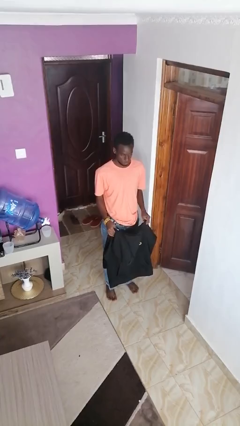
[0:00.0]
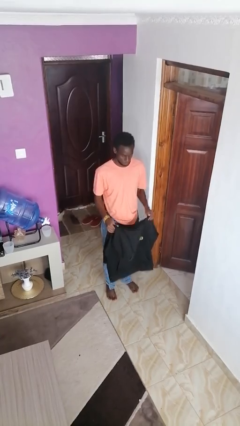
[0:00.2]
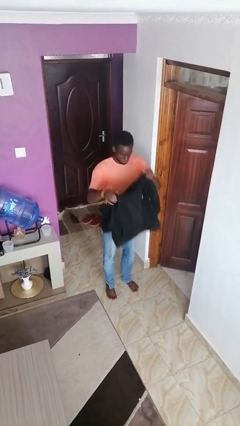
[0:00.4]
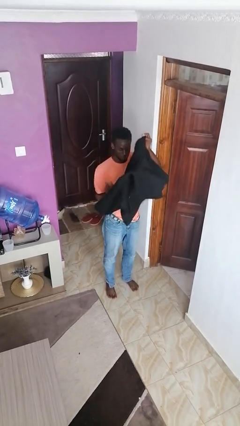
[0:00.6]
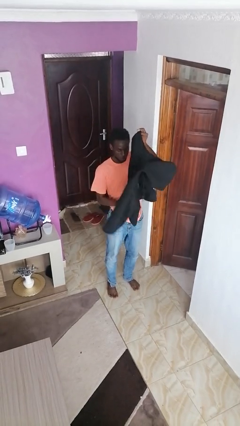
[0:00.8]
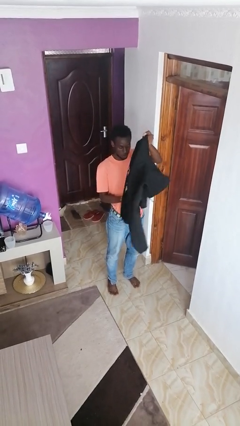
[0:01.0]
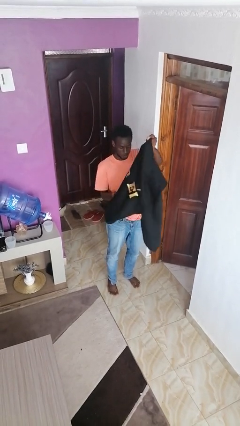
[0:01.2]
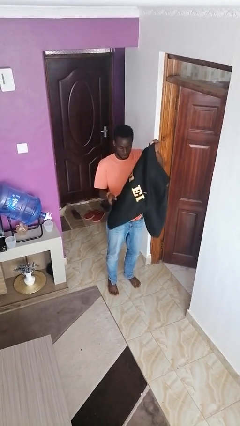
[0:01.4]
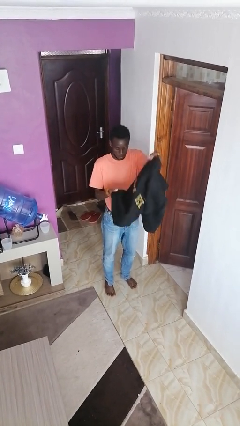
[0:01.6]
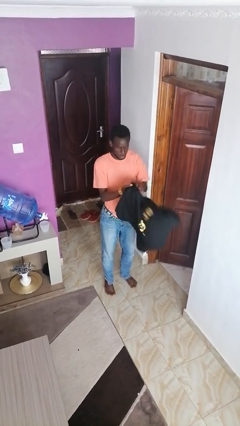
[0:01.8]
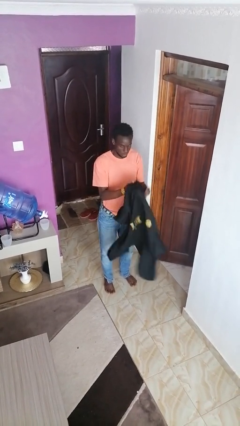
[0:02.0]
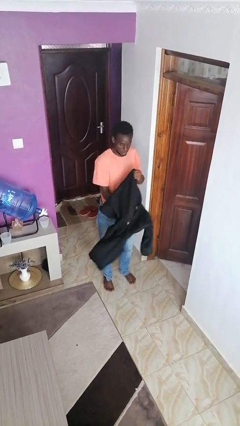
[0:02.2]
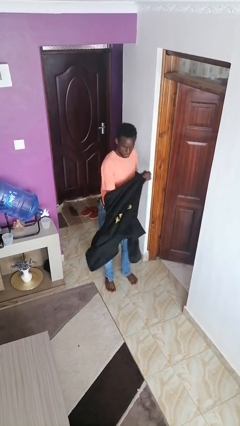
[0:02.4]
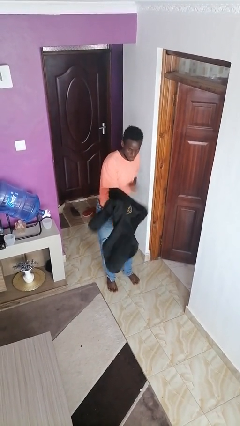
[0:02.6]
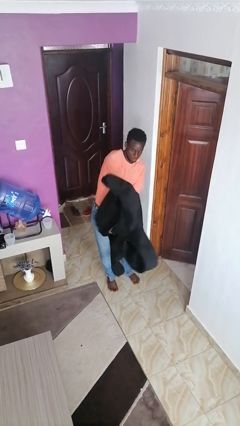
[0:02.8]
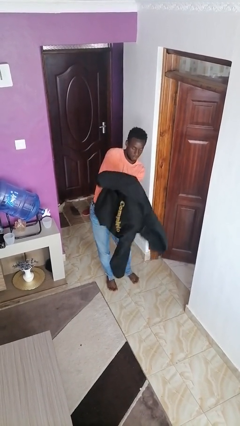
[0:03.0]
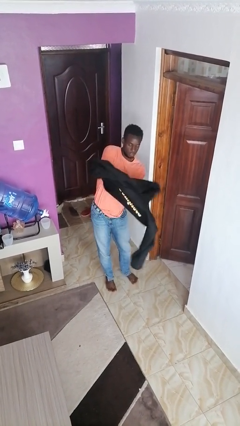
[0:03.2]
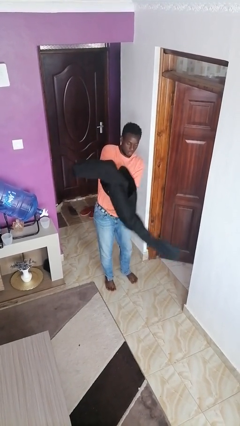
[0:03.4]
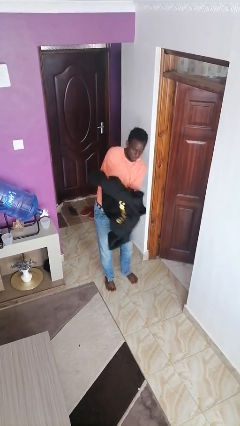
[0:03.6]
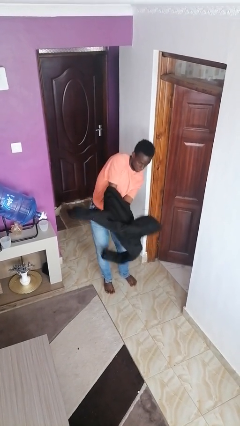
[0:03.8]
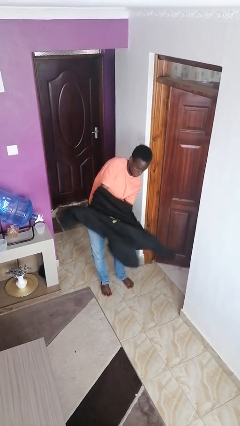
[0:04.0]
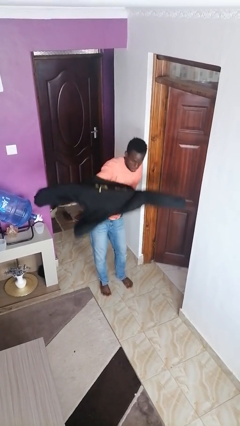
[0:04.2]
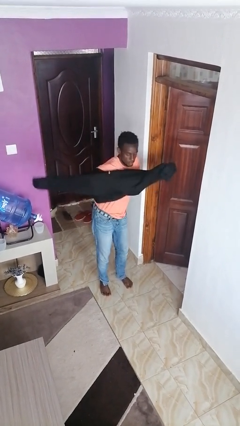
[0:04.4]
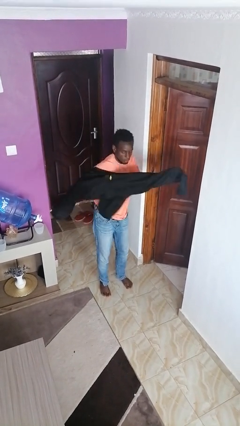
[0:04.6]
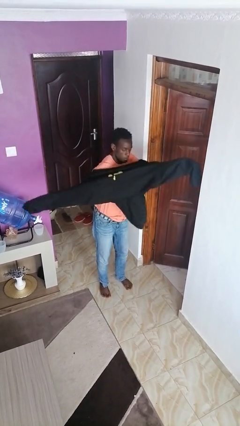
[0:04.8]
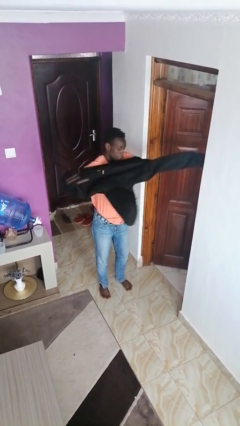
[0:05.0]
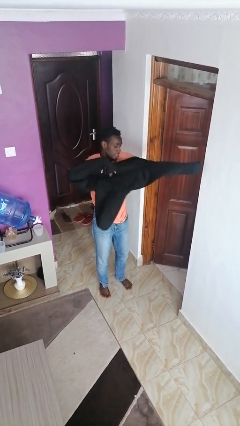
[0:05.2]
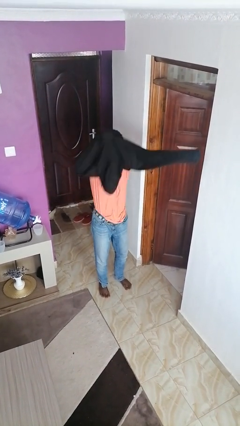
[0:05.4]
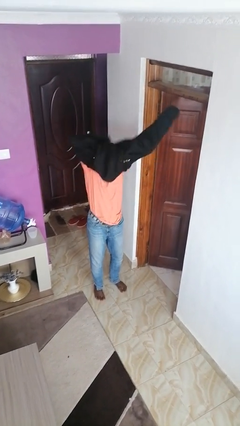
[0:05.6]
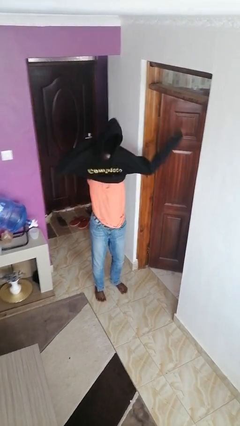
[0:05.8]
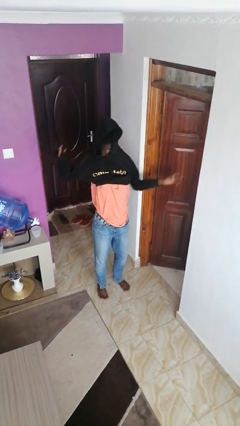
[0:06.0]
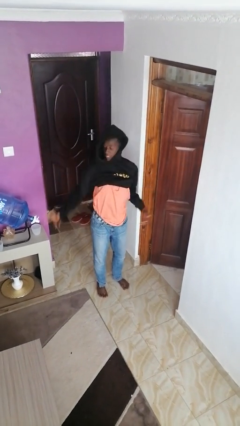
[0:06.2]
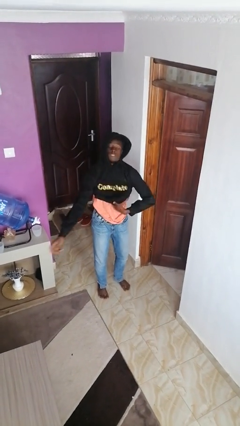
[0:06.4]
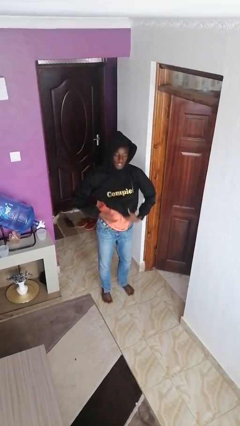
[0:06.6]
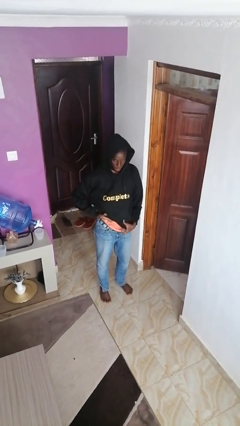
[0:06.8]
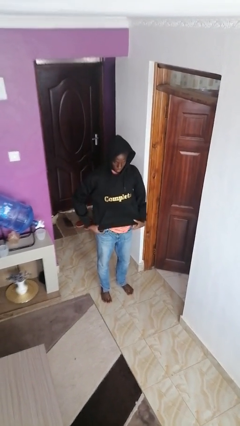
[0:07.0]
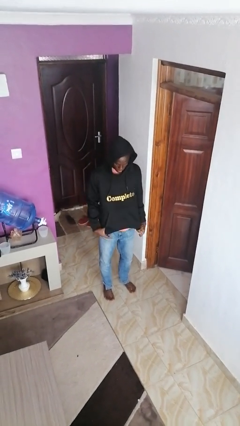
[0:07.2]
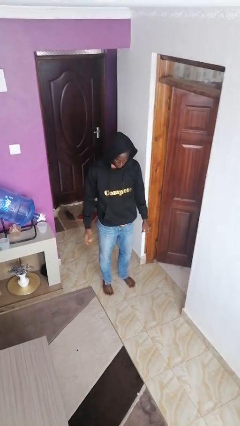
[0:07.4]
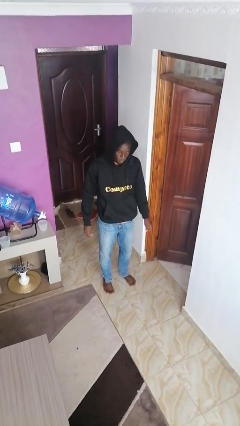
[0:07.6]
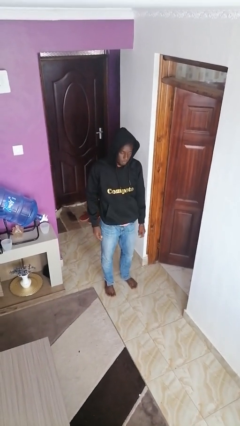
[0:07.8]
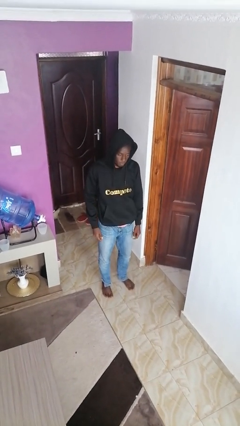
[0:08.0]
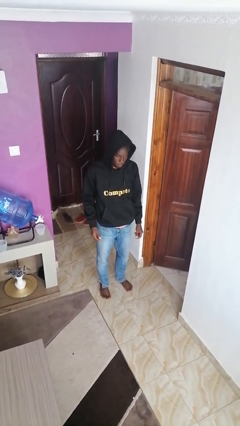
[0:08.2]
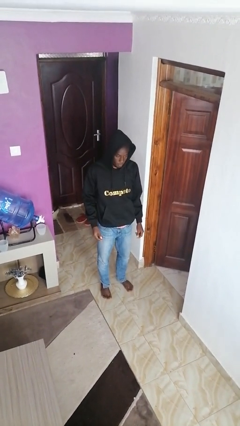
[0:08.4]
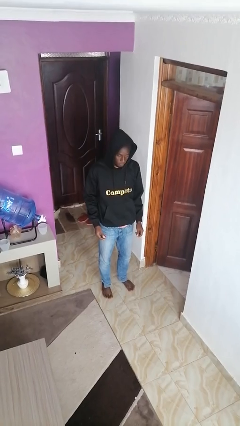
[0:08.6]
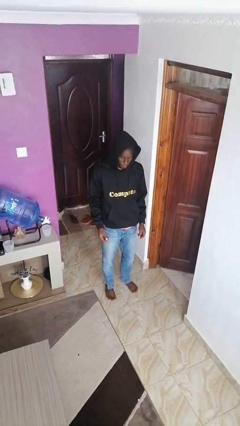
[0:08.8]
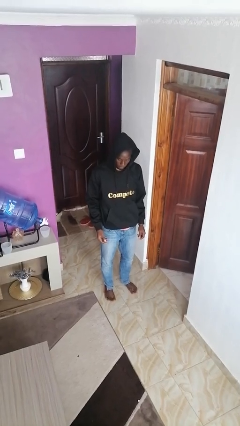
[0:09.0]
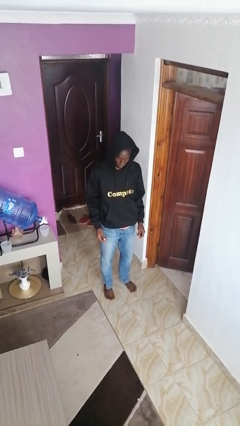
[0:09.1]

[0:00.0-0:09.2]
person puts on hoodie

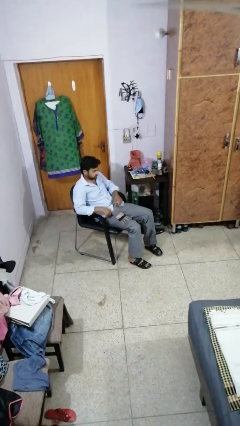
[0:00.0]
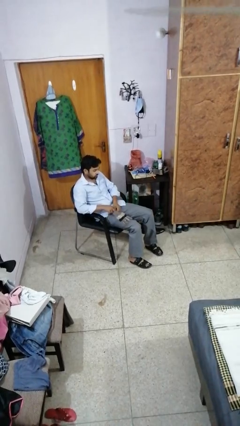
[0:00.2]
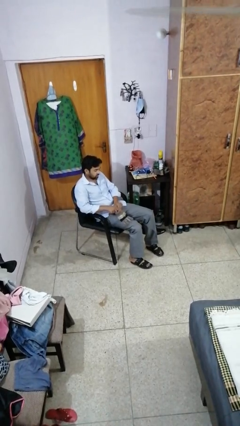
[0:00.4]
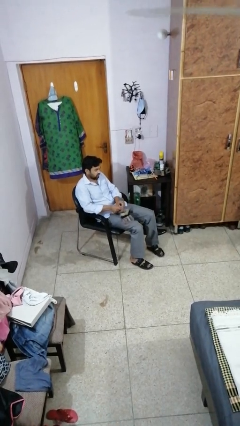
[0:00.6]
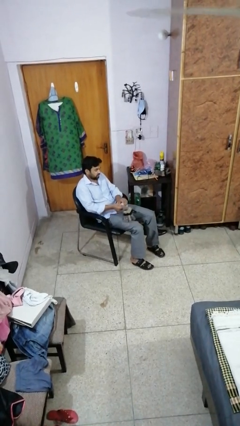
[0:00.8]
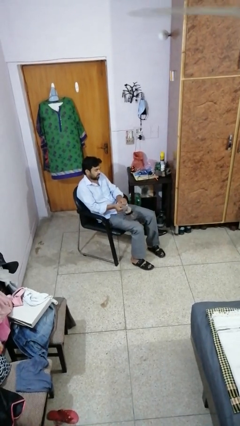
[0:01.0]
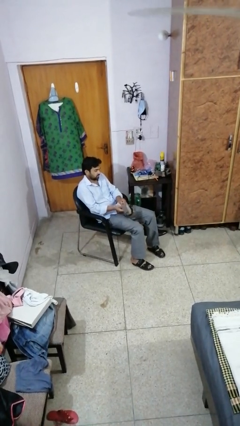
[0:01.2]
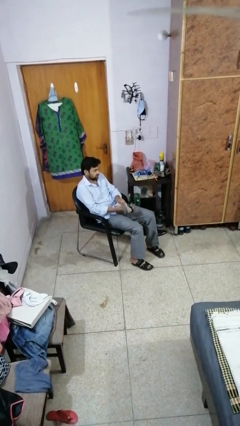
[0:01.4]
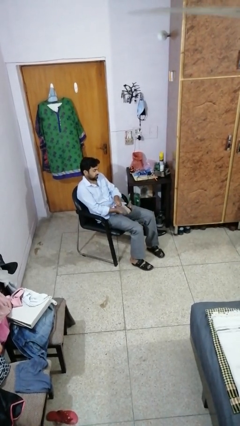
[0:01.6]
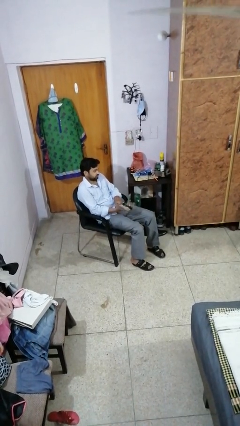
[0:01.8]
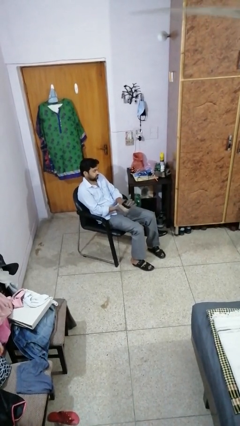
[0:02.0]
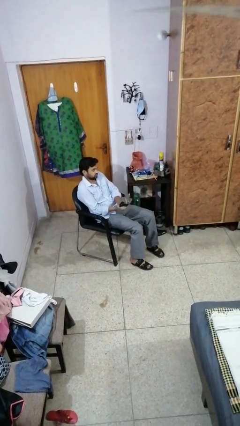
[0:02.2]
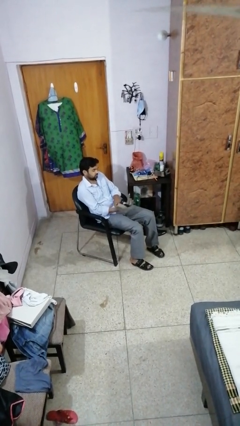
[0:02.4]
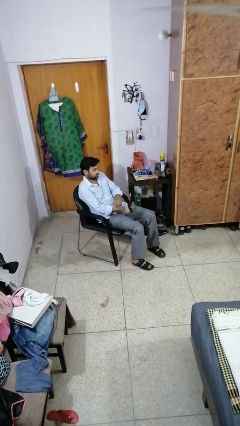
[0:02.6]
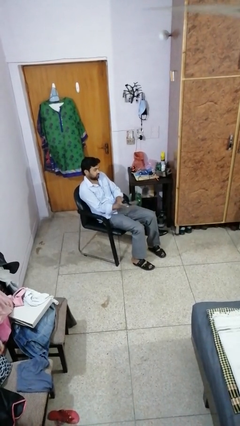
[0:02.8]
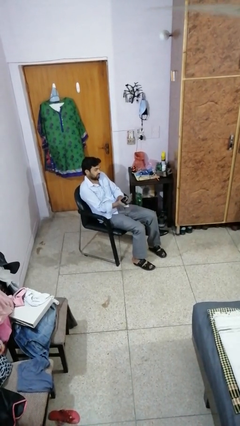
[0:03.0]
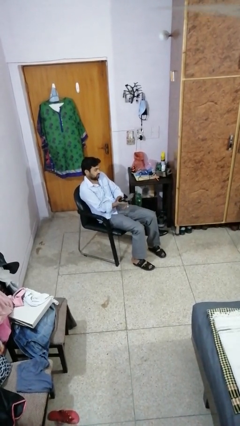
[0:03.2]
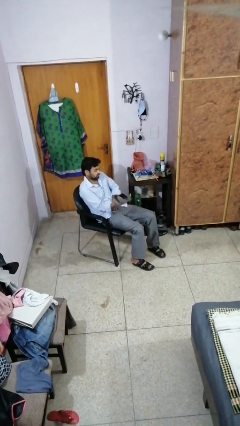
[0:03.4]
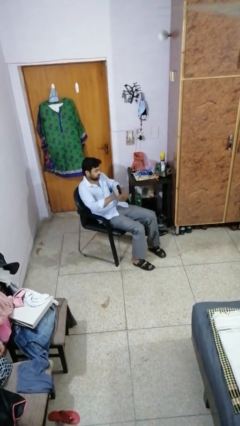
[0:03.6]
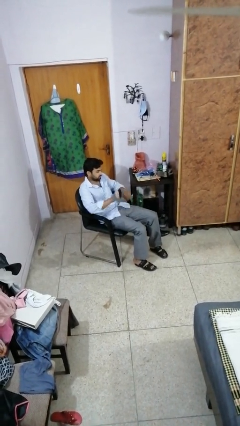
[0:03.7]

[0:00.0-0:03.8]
person puts on gloves

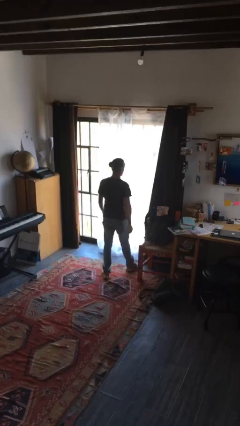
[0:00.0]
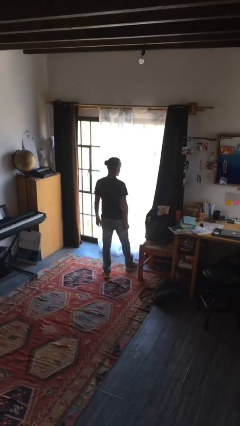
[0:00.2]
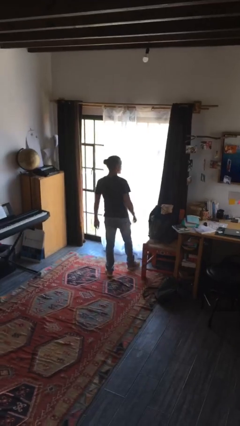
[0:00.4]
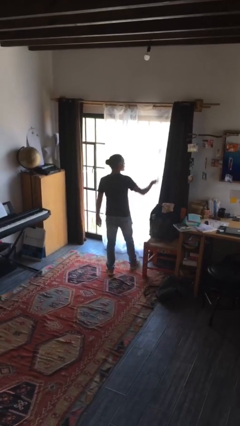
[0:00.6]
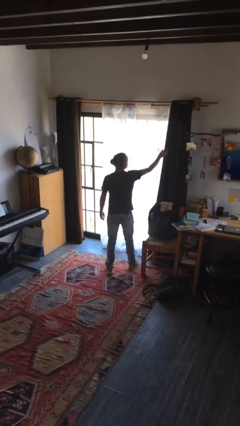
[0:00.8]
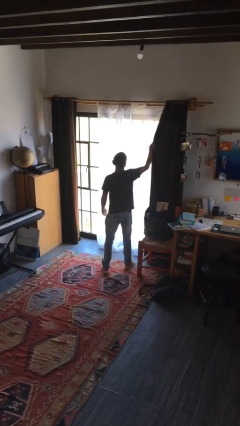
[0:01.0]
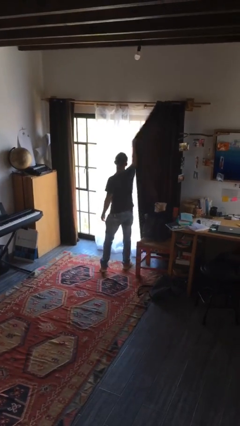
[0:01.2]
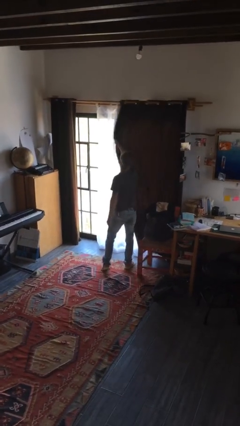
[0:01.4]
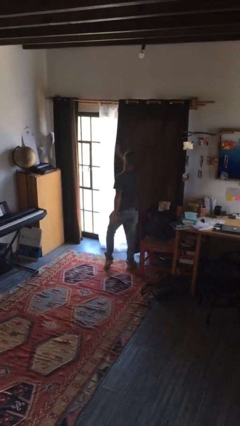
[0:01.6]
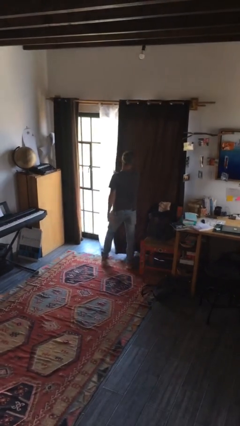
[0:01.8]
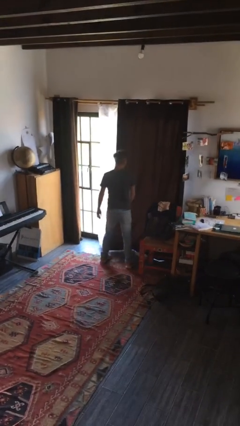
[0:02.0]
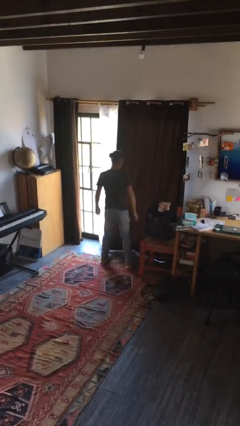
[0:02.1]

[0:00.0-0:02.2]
person closes curtains

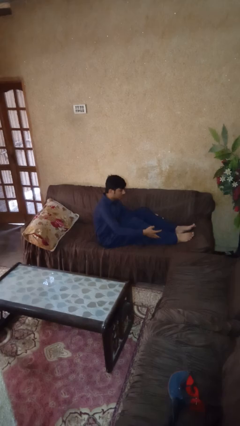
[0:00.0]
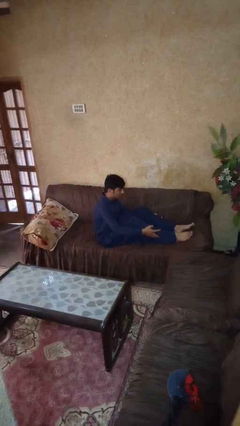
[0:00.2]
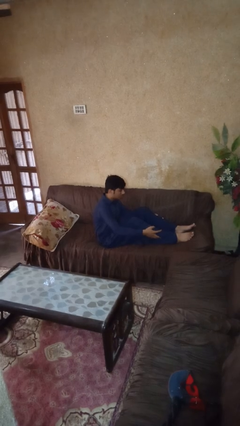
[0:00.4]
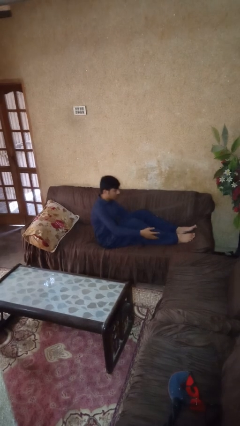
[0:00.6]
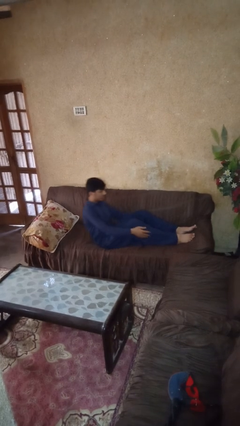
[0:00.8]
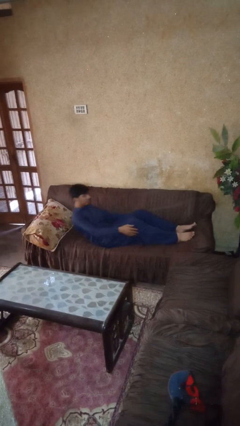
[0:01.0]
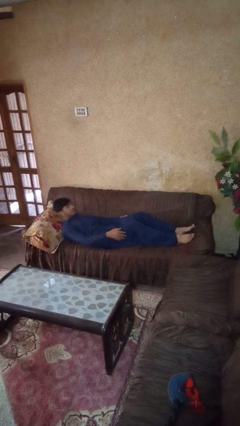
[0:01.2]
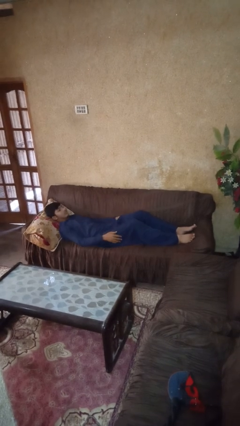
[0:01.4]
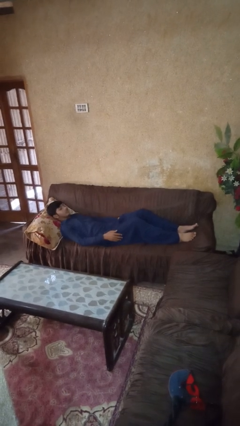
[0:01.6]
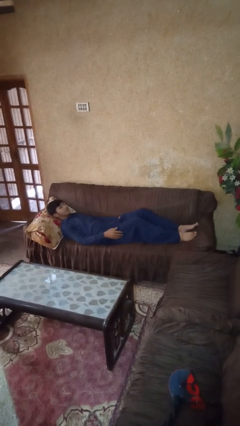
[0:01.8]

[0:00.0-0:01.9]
person lies down on couch

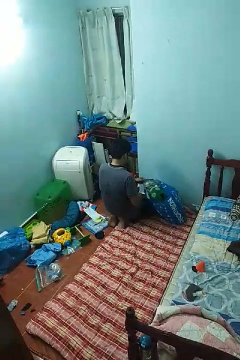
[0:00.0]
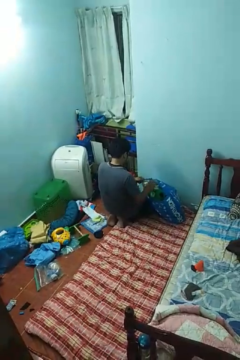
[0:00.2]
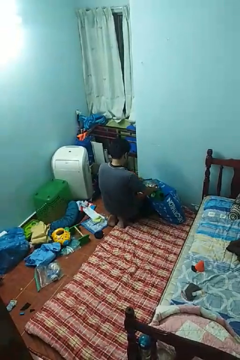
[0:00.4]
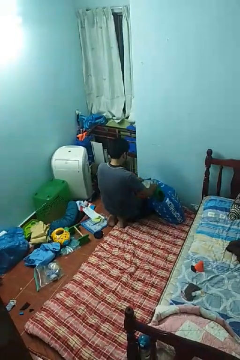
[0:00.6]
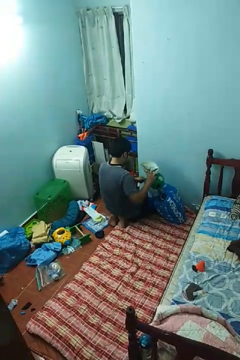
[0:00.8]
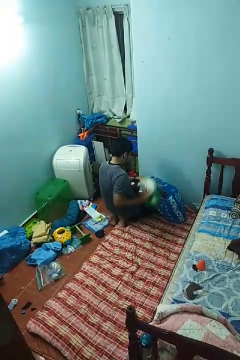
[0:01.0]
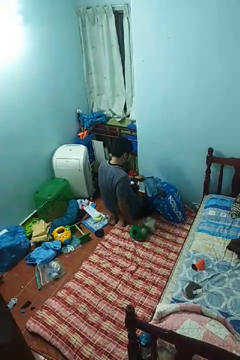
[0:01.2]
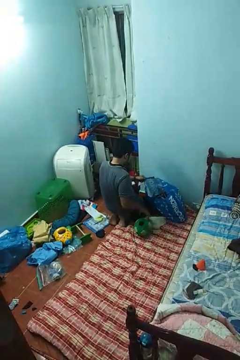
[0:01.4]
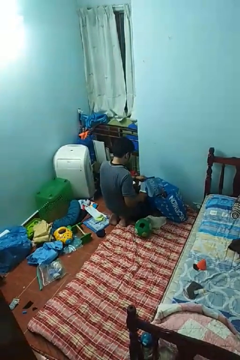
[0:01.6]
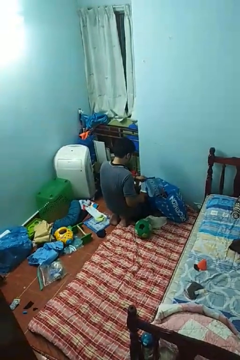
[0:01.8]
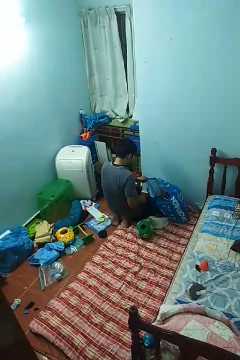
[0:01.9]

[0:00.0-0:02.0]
person takes object from bag
